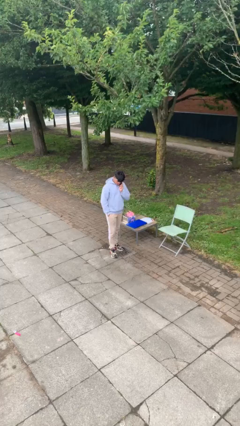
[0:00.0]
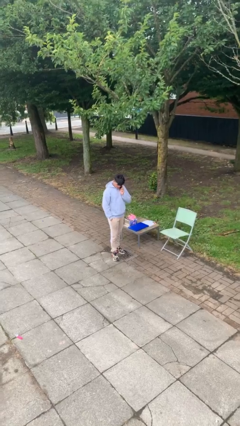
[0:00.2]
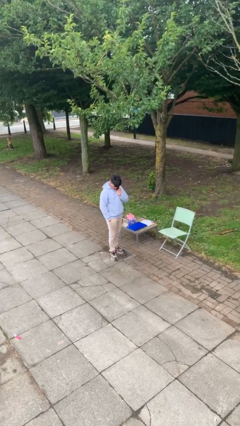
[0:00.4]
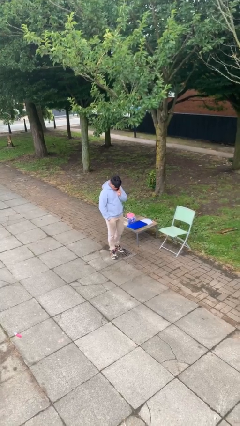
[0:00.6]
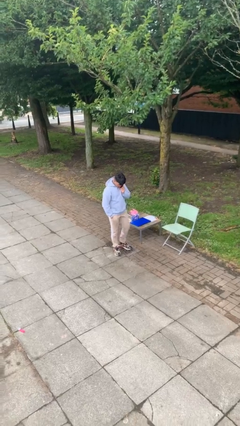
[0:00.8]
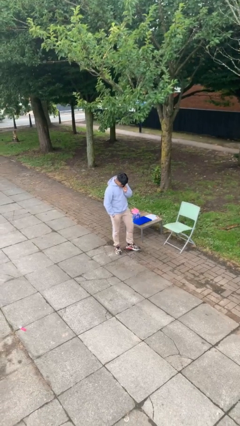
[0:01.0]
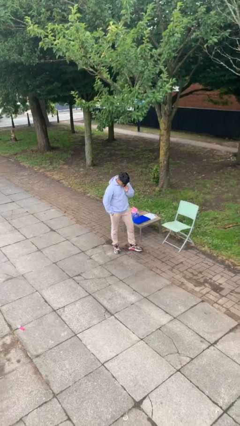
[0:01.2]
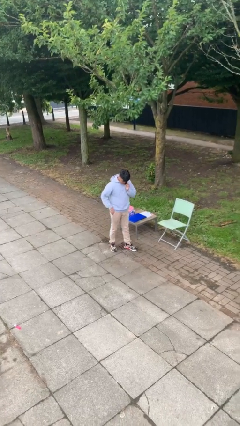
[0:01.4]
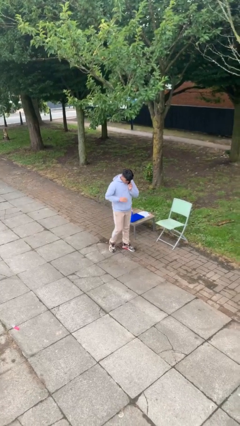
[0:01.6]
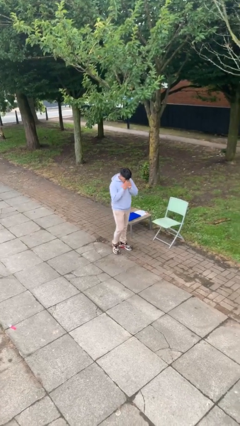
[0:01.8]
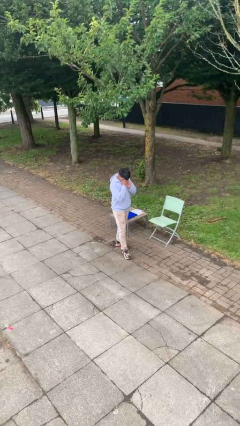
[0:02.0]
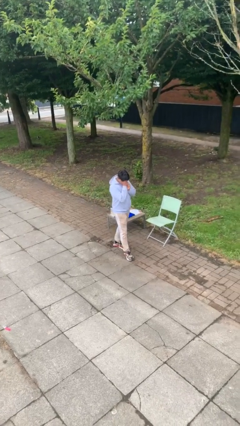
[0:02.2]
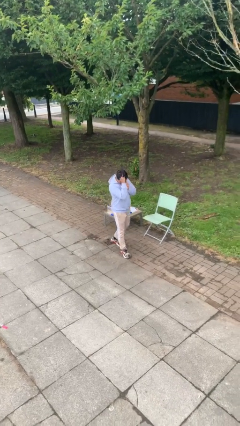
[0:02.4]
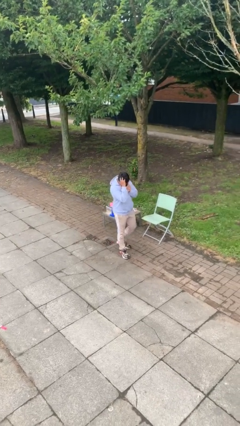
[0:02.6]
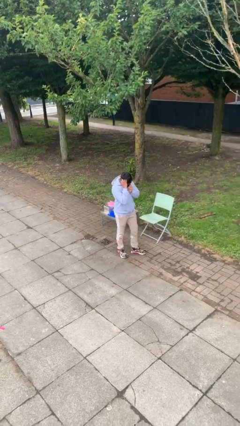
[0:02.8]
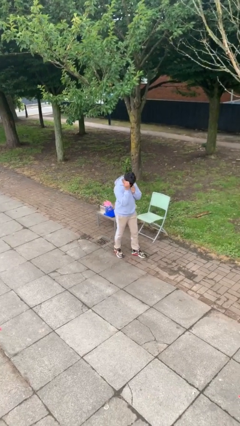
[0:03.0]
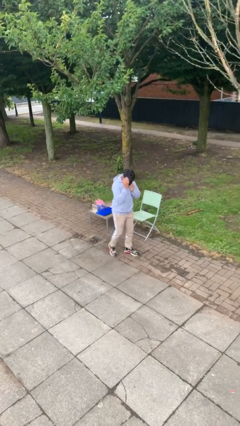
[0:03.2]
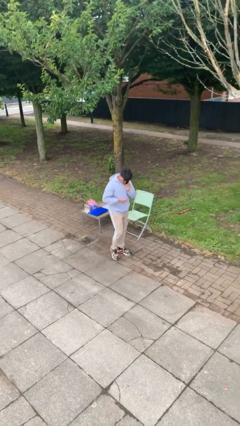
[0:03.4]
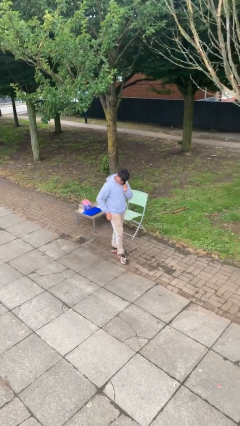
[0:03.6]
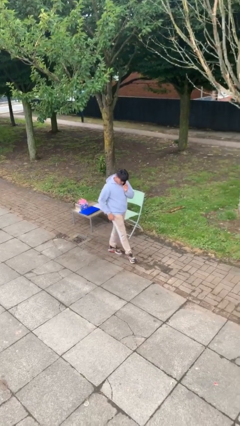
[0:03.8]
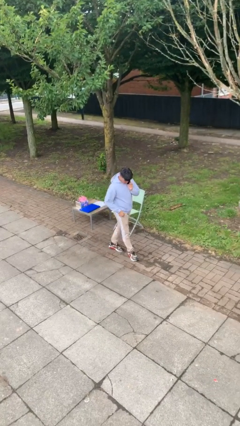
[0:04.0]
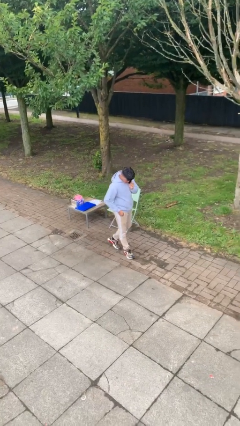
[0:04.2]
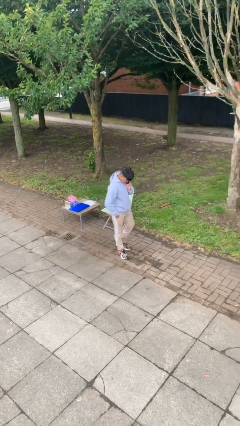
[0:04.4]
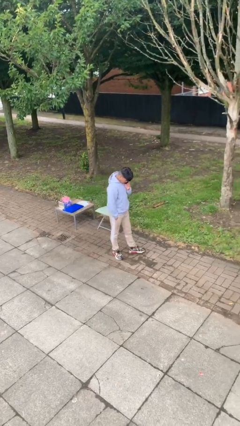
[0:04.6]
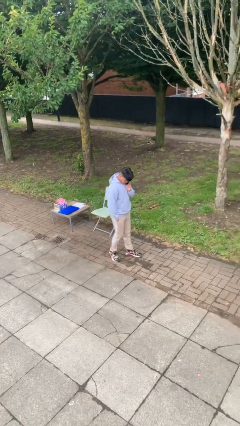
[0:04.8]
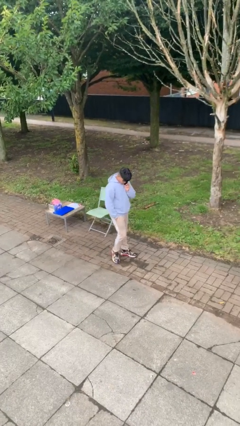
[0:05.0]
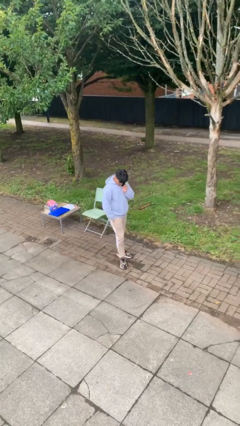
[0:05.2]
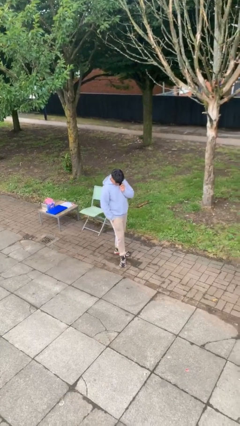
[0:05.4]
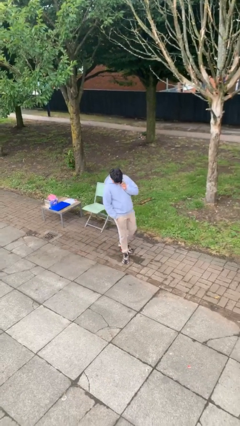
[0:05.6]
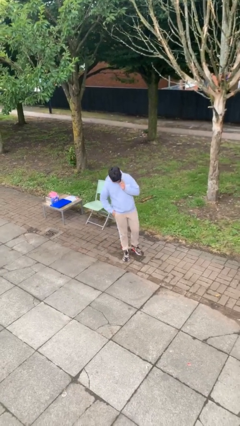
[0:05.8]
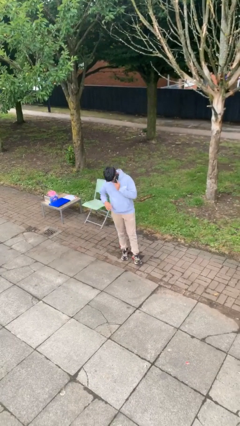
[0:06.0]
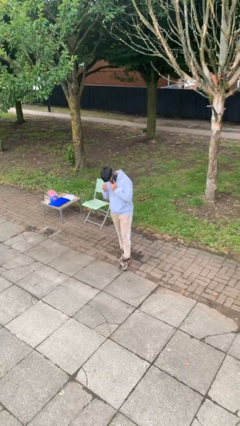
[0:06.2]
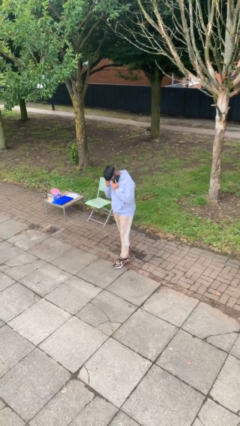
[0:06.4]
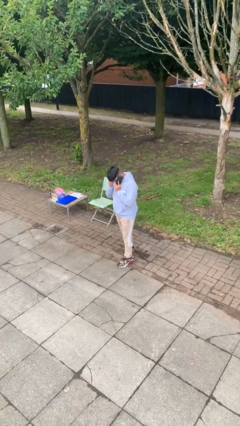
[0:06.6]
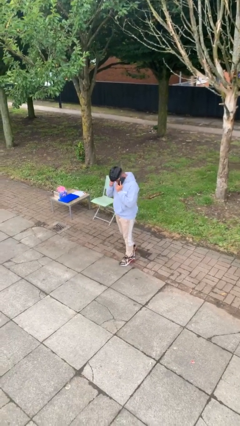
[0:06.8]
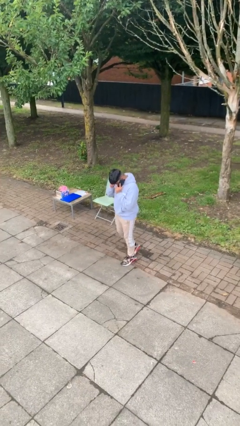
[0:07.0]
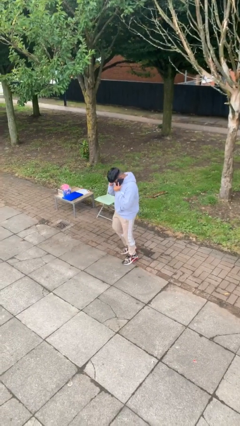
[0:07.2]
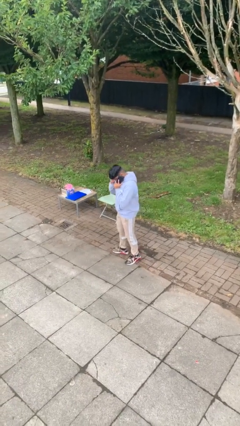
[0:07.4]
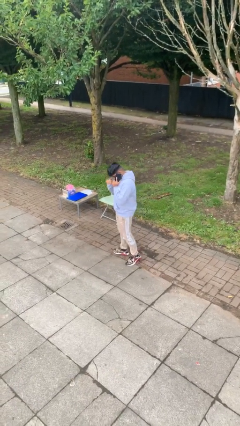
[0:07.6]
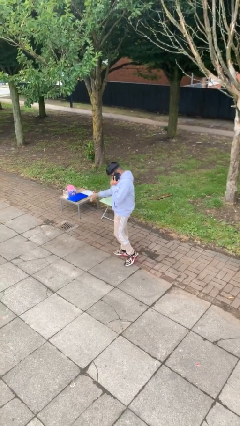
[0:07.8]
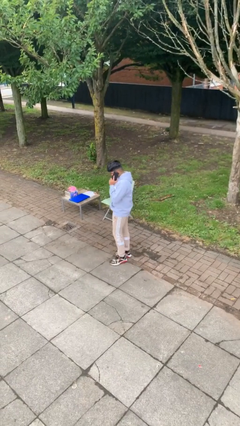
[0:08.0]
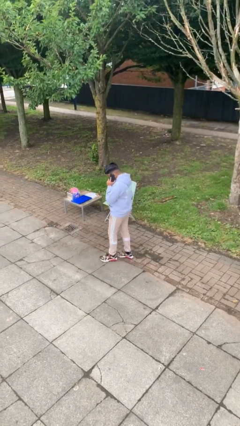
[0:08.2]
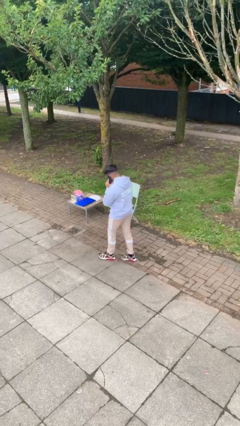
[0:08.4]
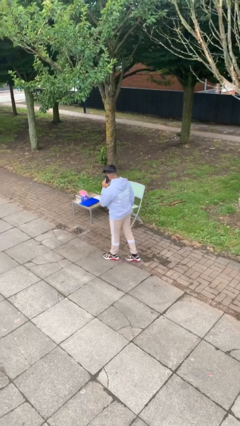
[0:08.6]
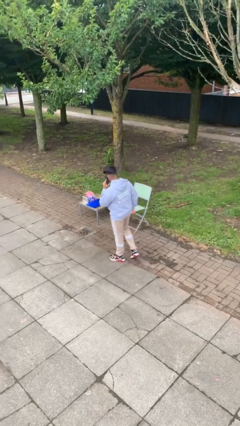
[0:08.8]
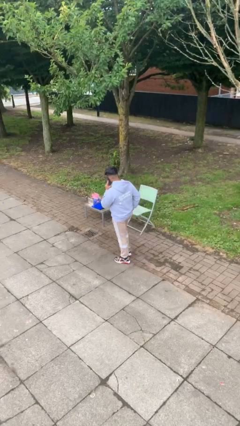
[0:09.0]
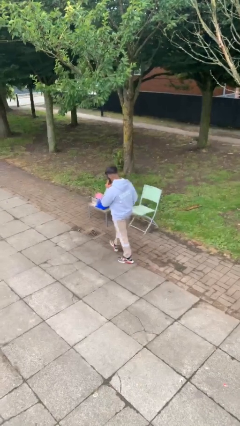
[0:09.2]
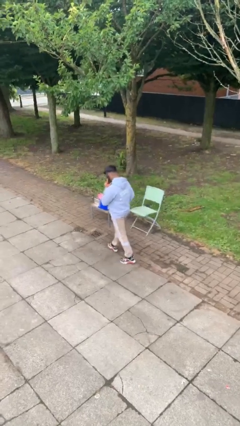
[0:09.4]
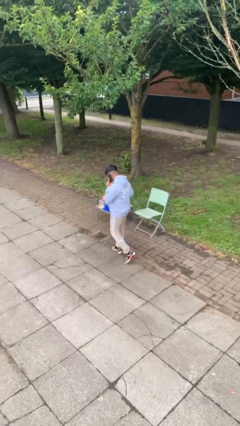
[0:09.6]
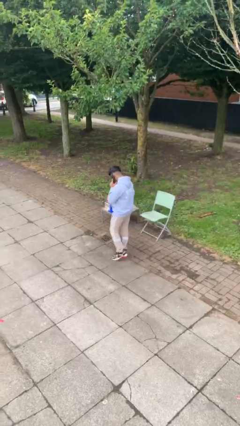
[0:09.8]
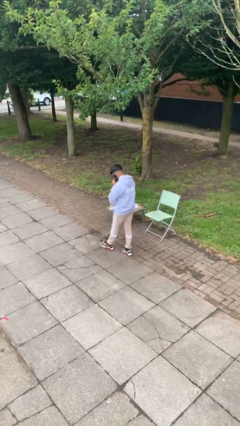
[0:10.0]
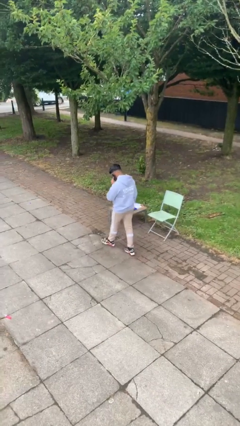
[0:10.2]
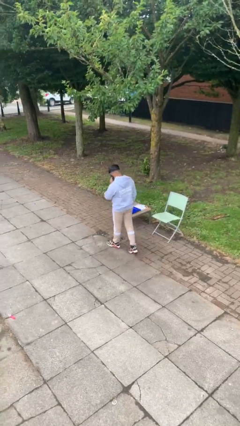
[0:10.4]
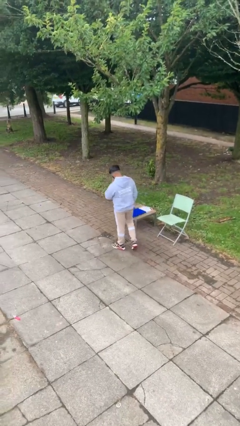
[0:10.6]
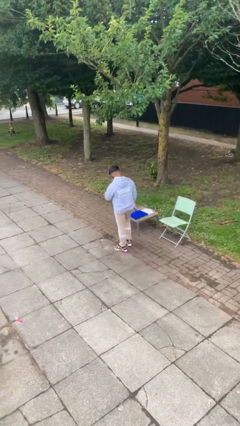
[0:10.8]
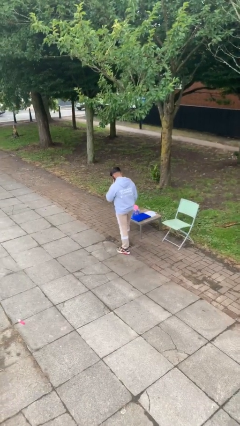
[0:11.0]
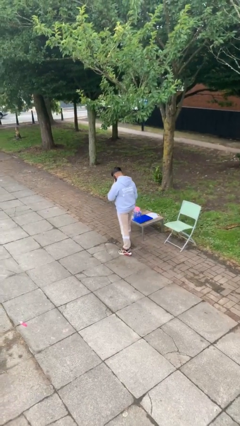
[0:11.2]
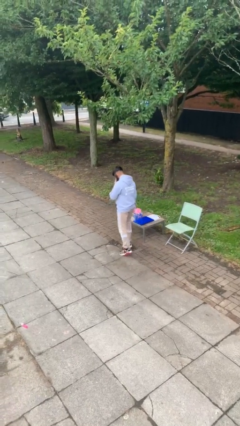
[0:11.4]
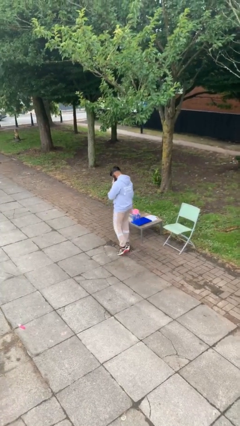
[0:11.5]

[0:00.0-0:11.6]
person talks on phone

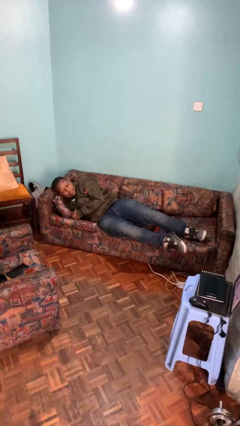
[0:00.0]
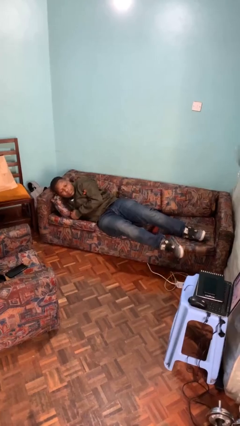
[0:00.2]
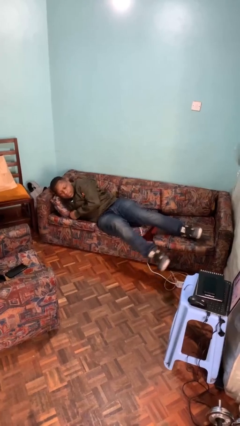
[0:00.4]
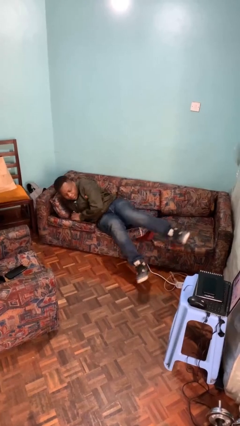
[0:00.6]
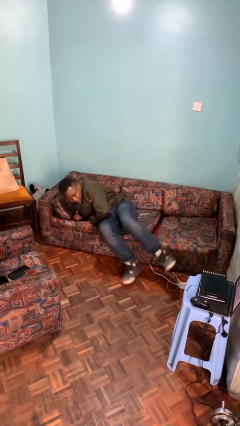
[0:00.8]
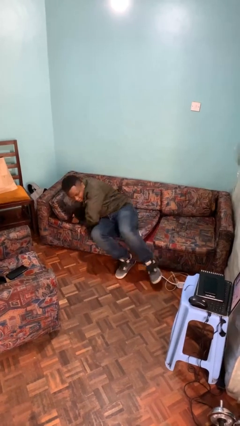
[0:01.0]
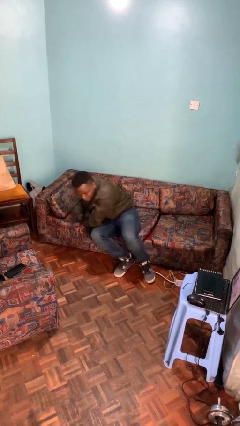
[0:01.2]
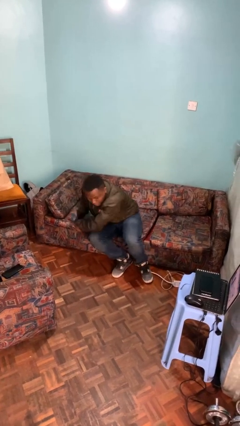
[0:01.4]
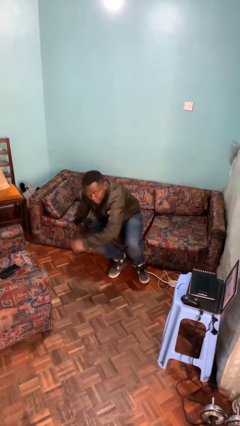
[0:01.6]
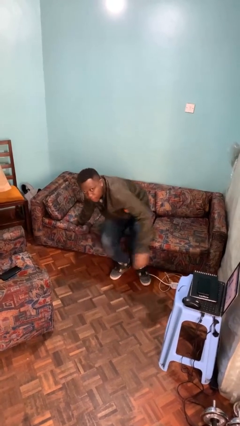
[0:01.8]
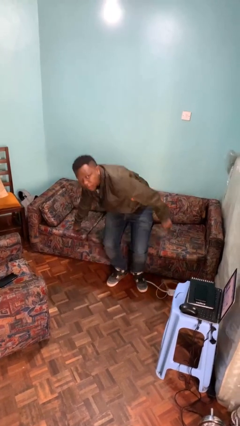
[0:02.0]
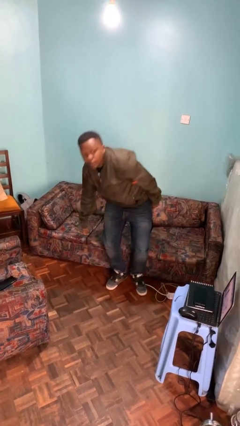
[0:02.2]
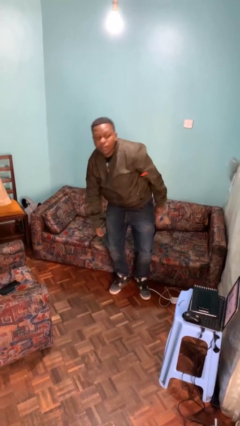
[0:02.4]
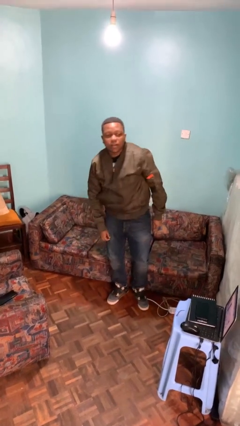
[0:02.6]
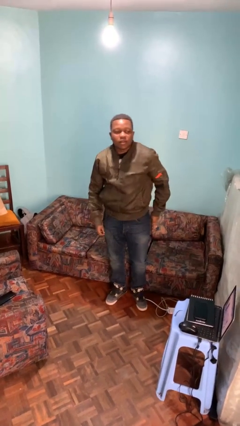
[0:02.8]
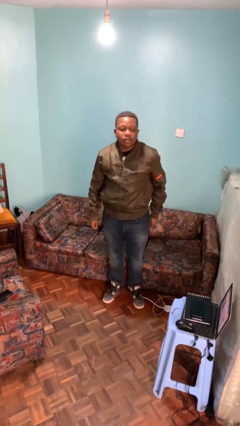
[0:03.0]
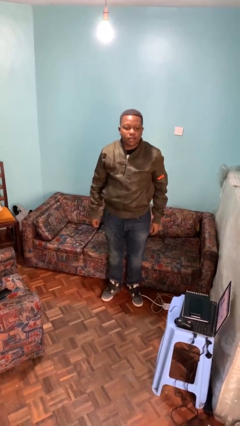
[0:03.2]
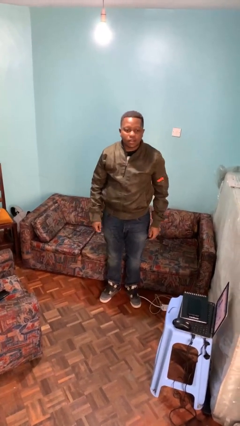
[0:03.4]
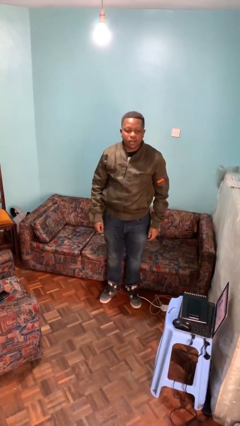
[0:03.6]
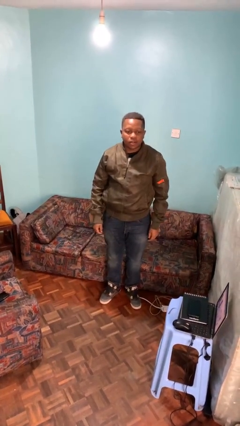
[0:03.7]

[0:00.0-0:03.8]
person stands up

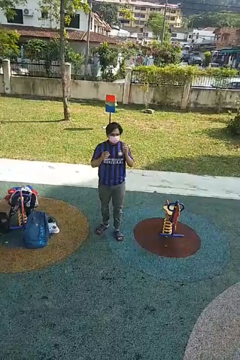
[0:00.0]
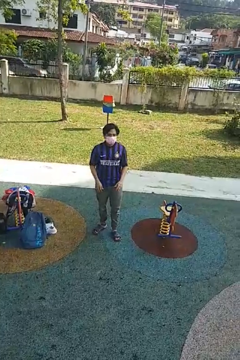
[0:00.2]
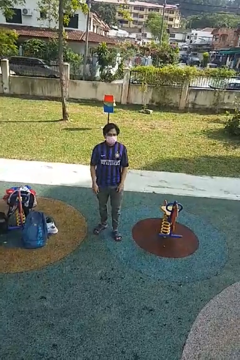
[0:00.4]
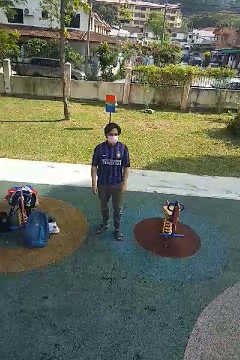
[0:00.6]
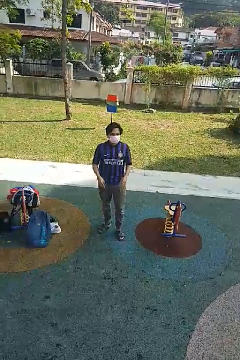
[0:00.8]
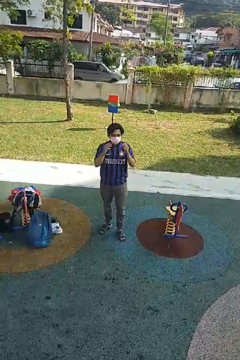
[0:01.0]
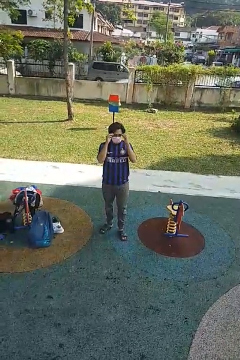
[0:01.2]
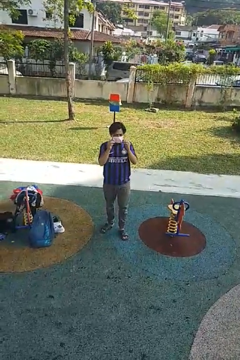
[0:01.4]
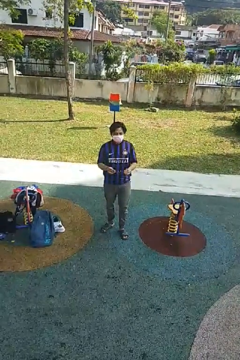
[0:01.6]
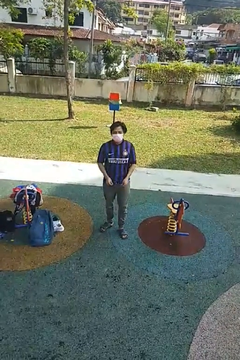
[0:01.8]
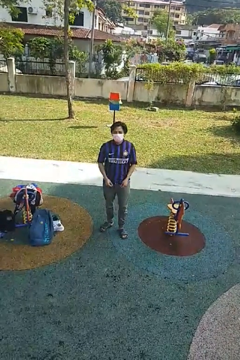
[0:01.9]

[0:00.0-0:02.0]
person takes off glasses

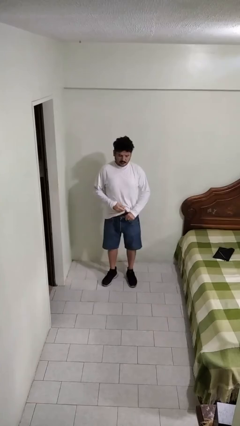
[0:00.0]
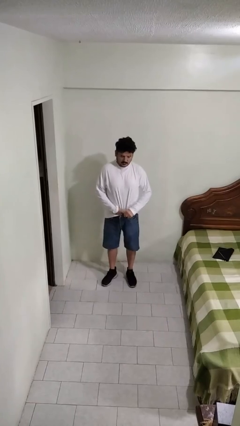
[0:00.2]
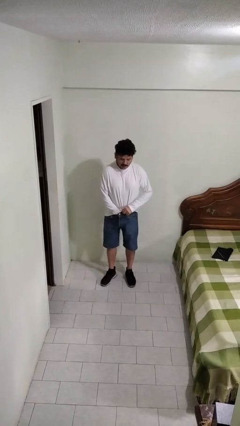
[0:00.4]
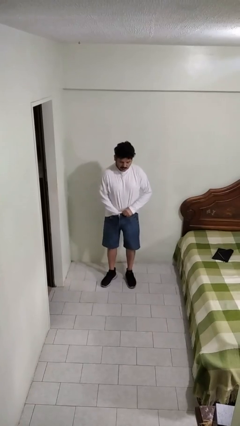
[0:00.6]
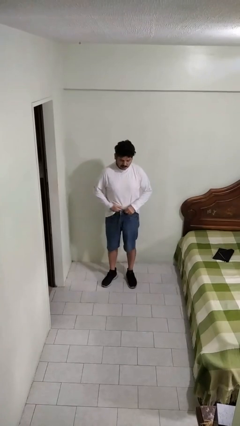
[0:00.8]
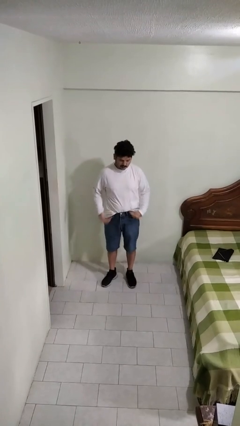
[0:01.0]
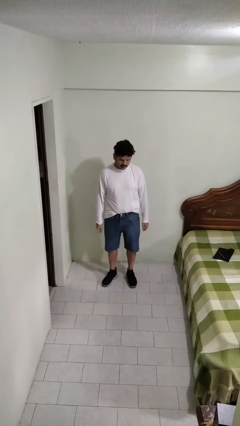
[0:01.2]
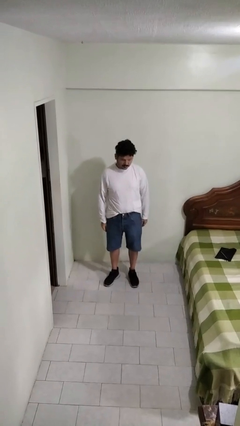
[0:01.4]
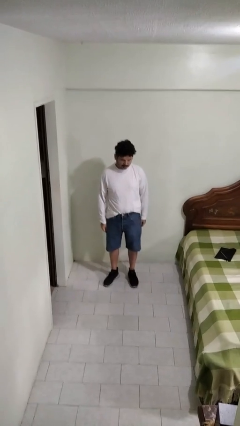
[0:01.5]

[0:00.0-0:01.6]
person tucks in shirt
